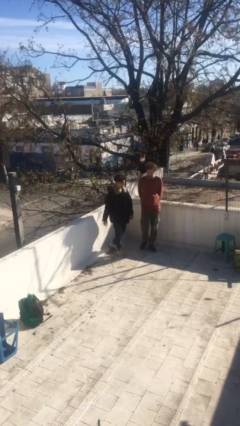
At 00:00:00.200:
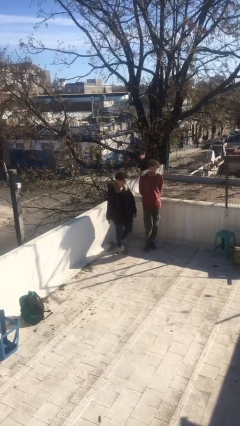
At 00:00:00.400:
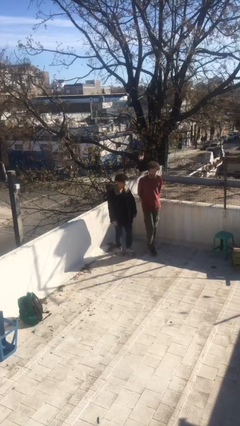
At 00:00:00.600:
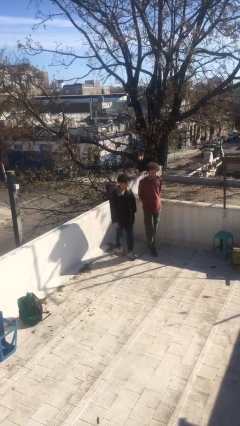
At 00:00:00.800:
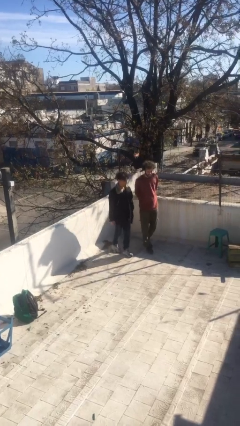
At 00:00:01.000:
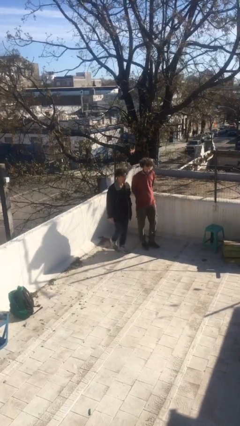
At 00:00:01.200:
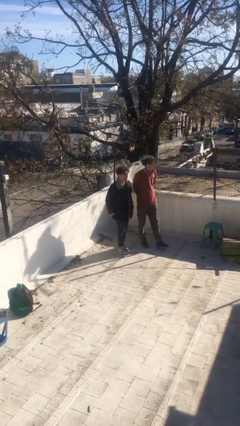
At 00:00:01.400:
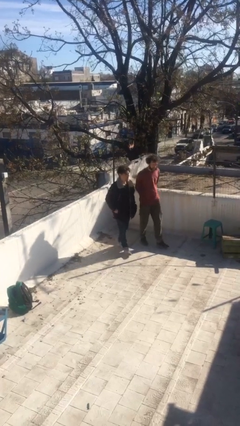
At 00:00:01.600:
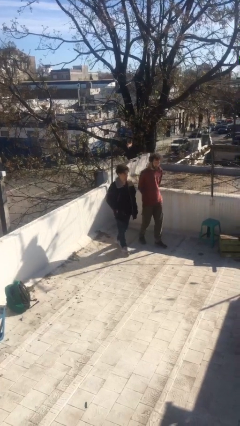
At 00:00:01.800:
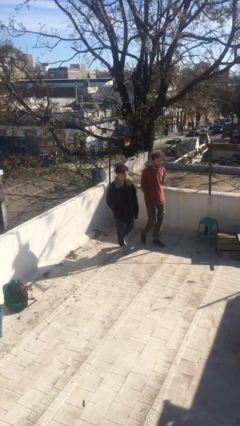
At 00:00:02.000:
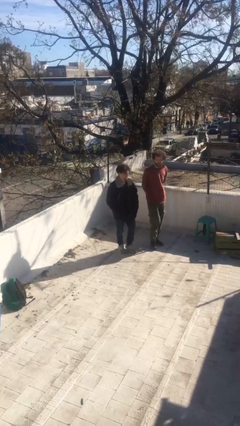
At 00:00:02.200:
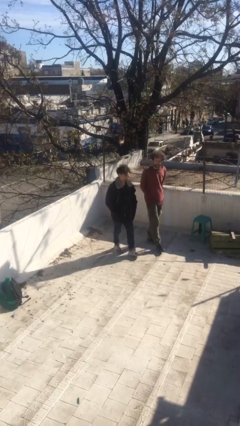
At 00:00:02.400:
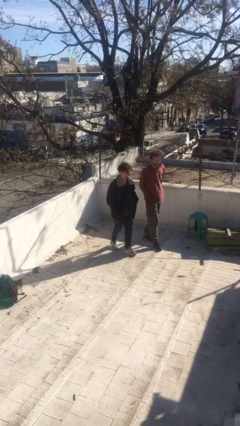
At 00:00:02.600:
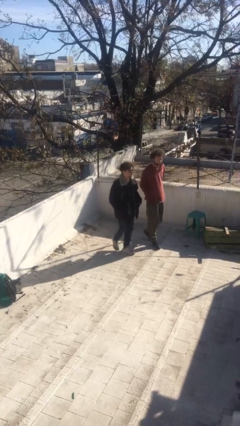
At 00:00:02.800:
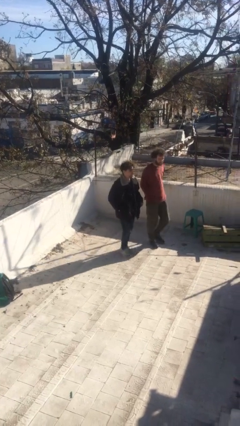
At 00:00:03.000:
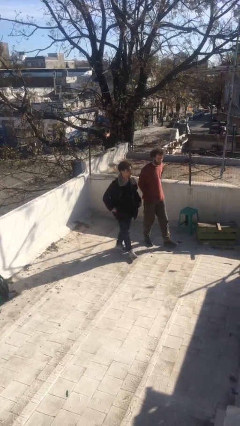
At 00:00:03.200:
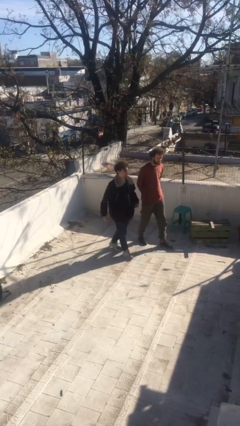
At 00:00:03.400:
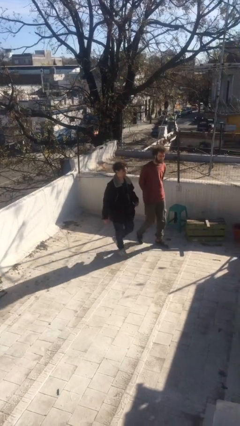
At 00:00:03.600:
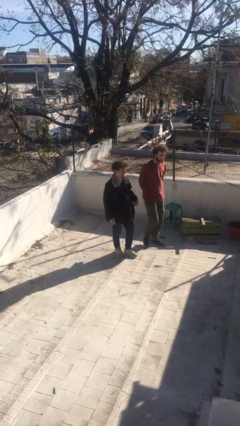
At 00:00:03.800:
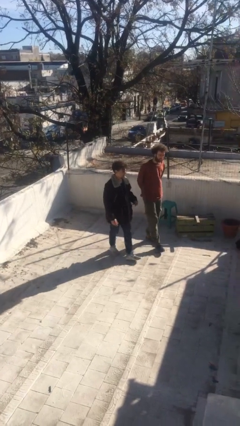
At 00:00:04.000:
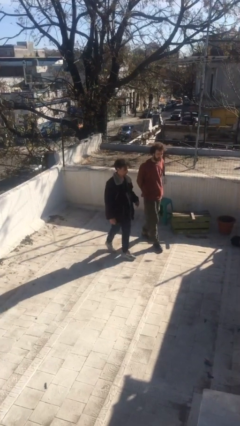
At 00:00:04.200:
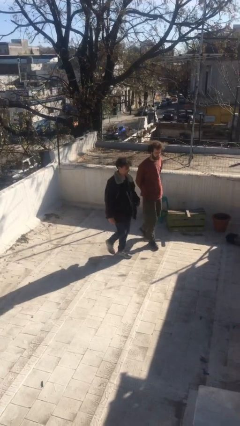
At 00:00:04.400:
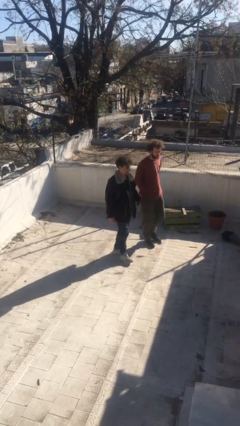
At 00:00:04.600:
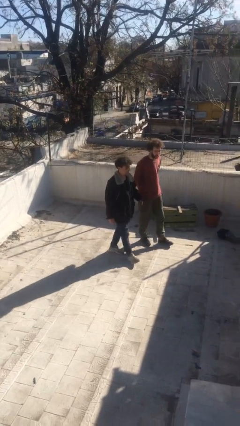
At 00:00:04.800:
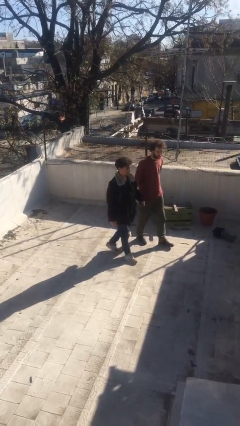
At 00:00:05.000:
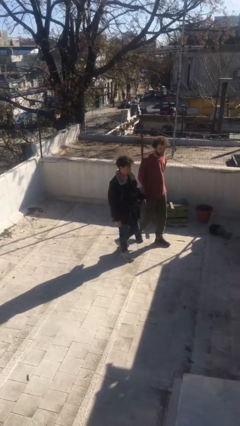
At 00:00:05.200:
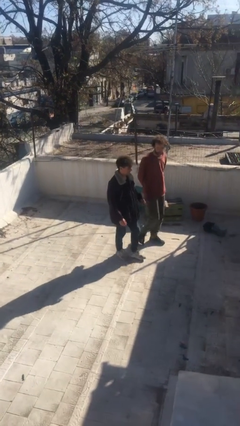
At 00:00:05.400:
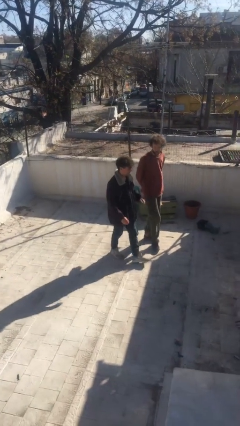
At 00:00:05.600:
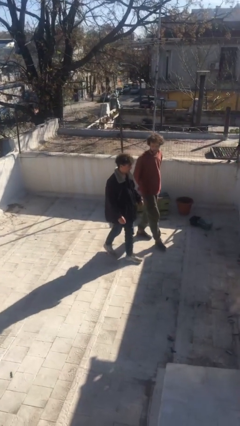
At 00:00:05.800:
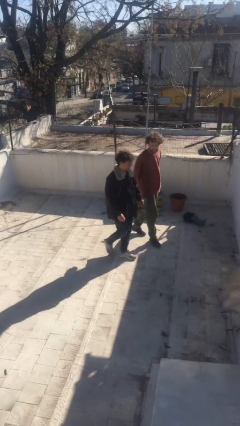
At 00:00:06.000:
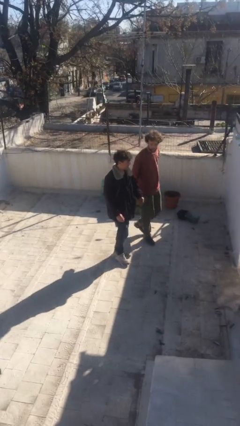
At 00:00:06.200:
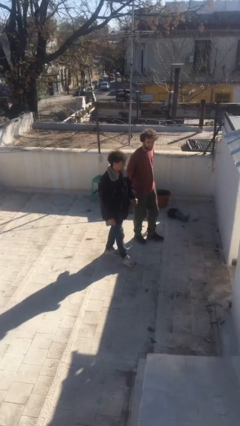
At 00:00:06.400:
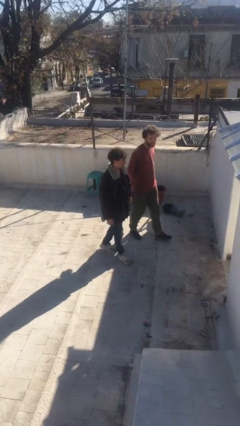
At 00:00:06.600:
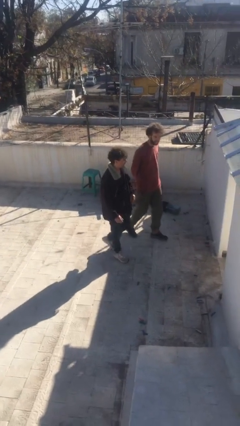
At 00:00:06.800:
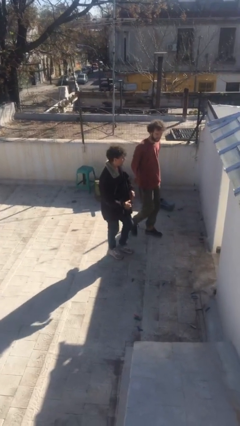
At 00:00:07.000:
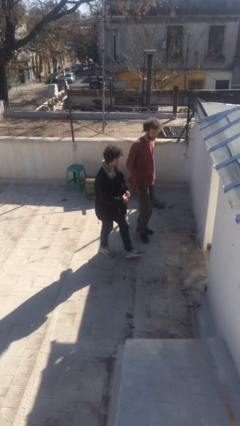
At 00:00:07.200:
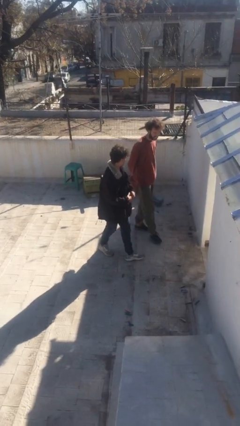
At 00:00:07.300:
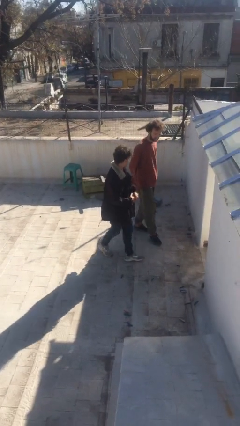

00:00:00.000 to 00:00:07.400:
person talks to person

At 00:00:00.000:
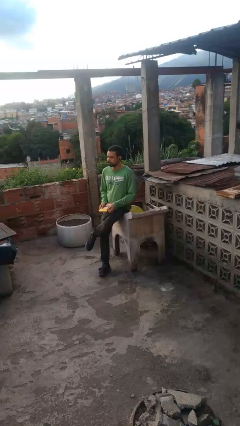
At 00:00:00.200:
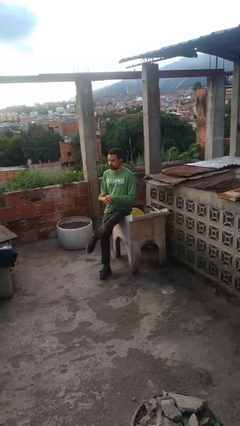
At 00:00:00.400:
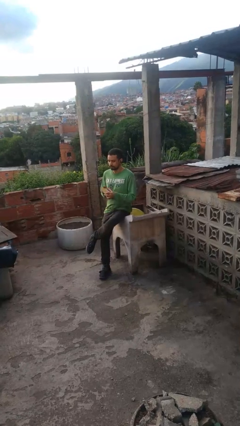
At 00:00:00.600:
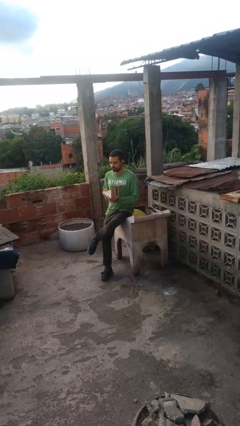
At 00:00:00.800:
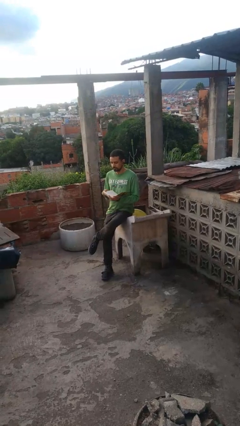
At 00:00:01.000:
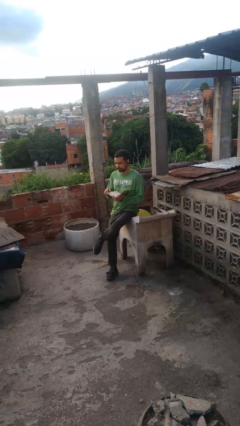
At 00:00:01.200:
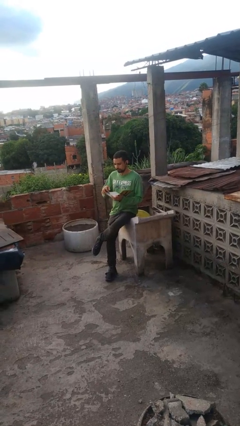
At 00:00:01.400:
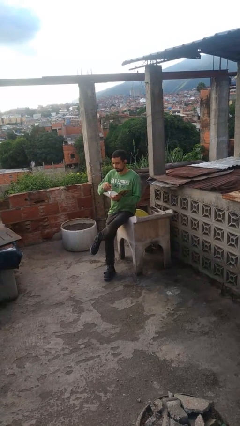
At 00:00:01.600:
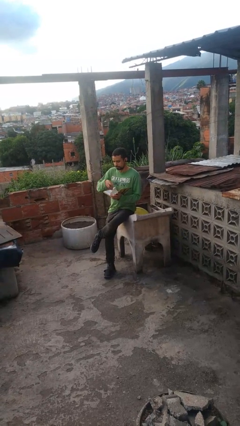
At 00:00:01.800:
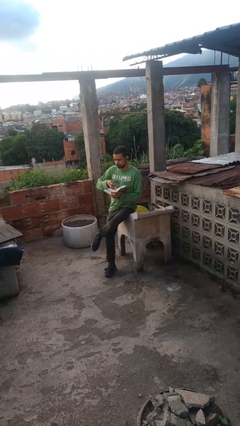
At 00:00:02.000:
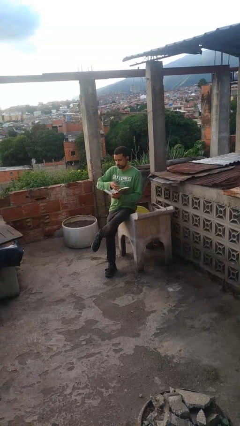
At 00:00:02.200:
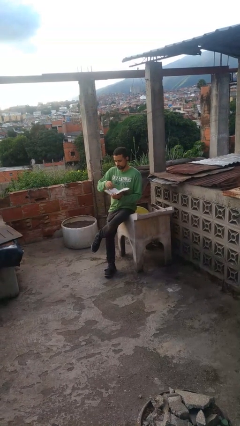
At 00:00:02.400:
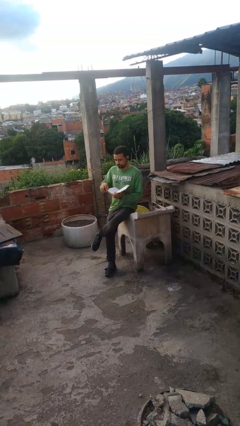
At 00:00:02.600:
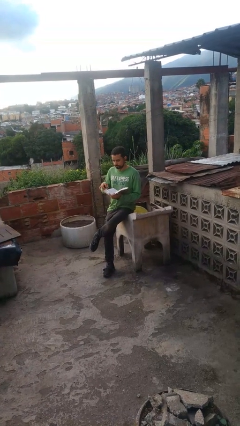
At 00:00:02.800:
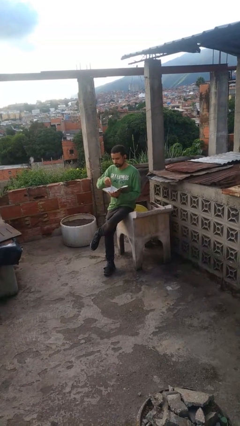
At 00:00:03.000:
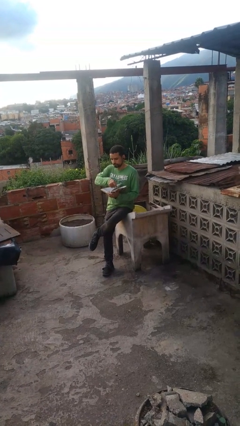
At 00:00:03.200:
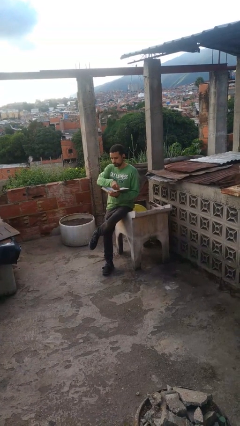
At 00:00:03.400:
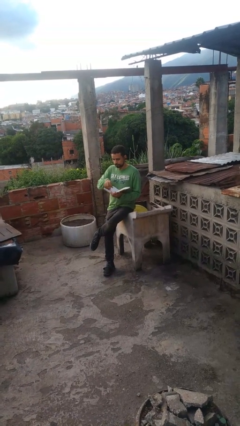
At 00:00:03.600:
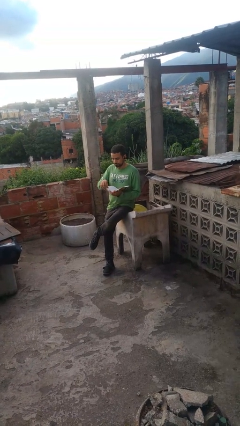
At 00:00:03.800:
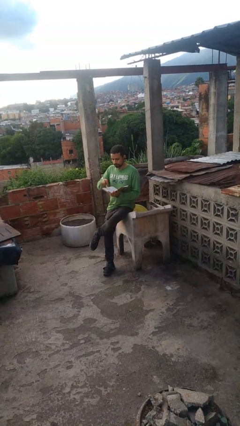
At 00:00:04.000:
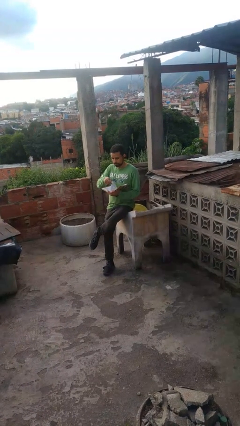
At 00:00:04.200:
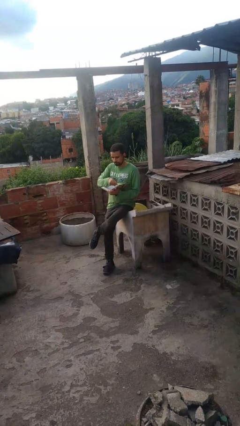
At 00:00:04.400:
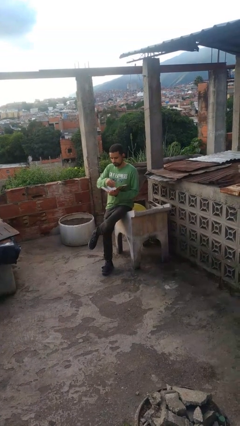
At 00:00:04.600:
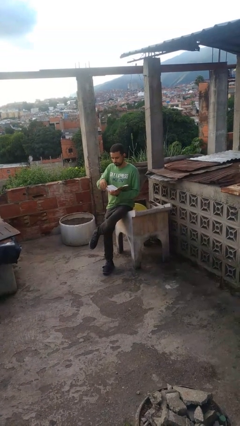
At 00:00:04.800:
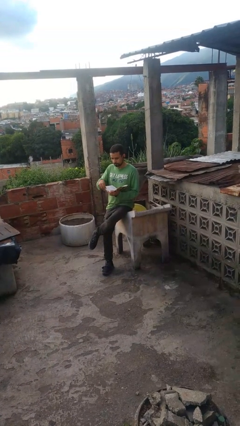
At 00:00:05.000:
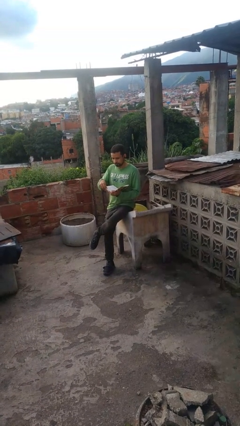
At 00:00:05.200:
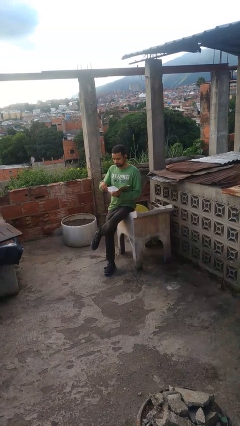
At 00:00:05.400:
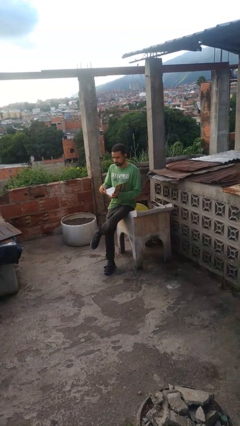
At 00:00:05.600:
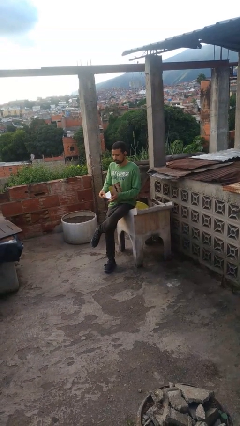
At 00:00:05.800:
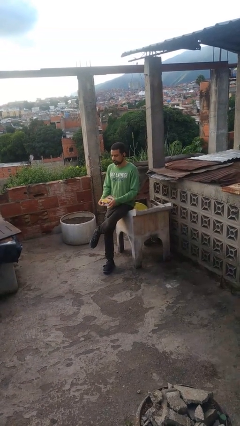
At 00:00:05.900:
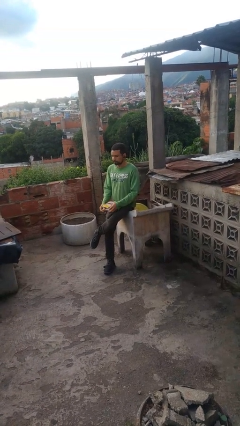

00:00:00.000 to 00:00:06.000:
person reads book

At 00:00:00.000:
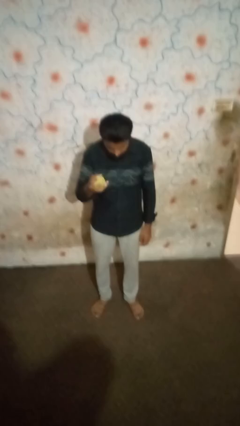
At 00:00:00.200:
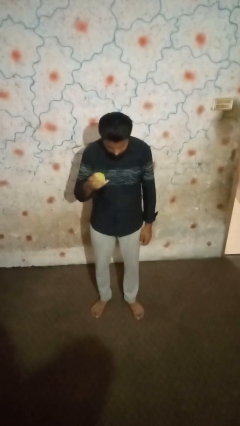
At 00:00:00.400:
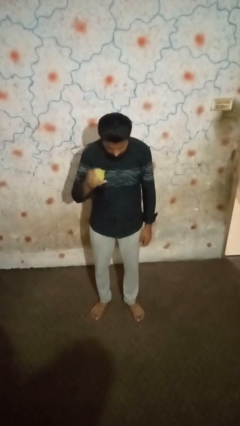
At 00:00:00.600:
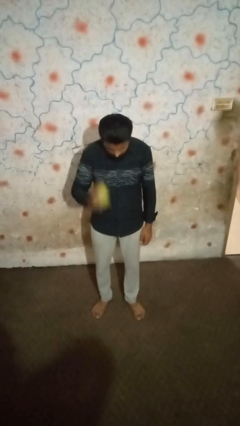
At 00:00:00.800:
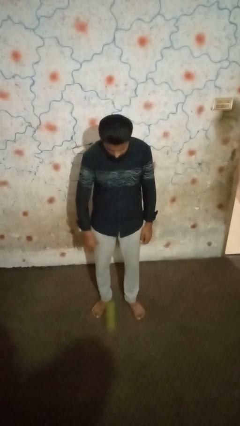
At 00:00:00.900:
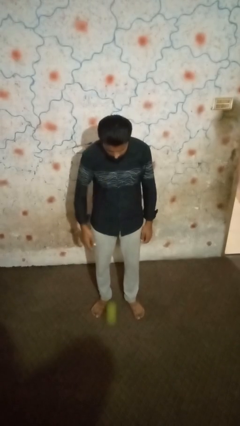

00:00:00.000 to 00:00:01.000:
person bounces ball on floor

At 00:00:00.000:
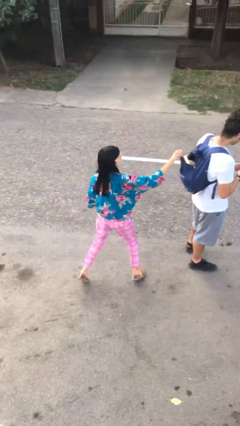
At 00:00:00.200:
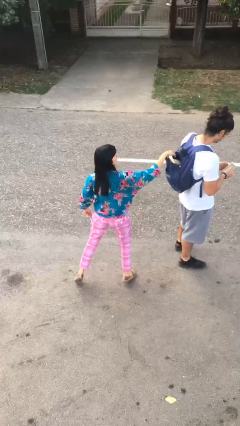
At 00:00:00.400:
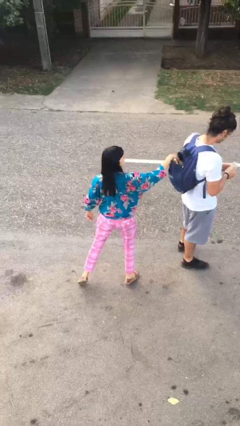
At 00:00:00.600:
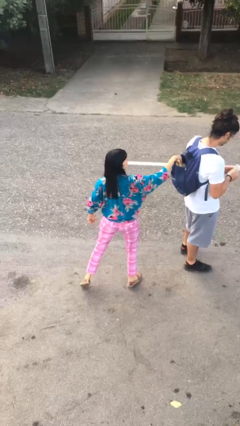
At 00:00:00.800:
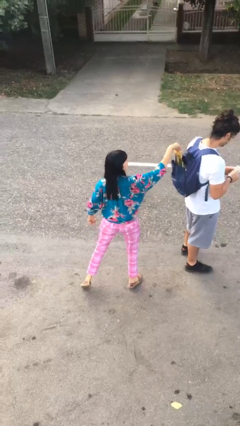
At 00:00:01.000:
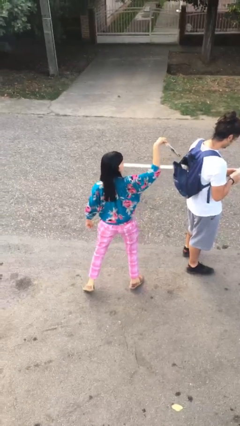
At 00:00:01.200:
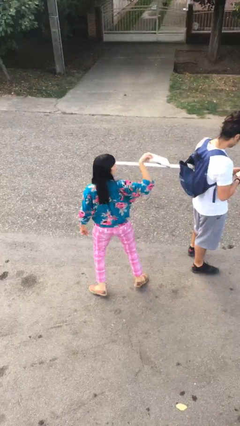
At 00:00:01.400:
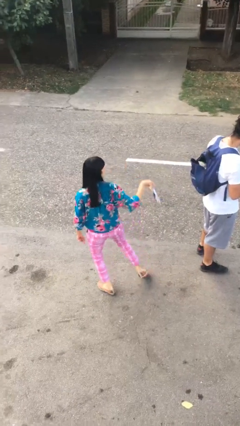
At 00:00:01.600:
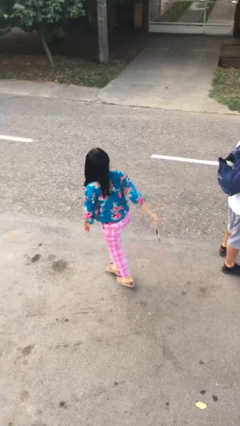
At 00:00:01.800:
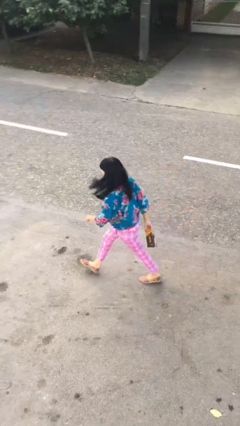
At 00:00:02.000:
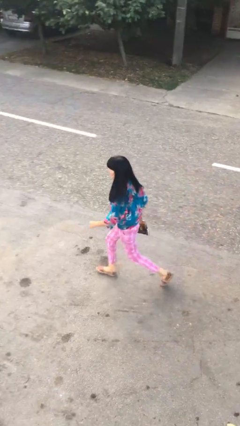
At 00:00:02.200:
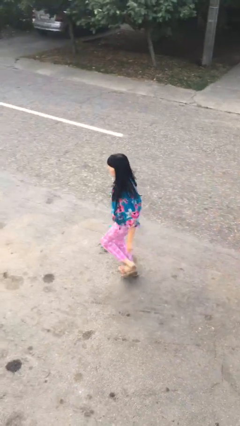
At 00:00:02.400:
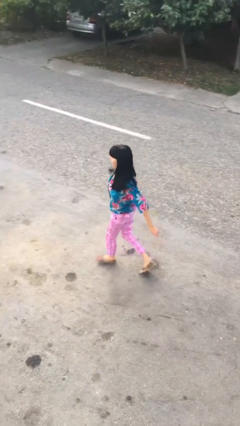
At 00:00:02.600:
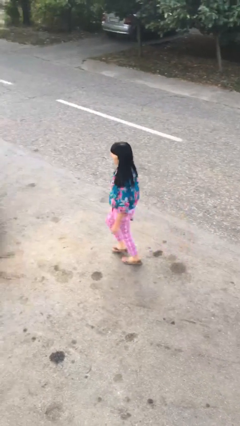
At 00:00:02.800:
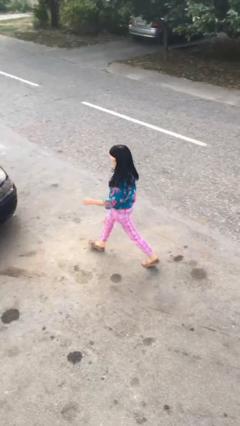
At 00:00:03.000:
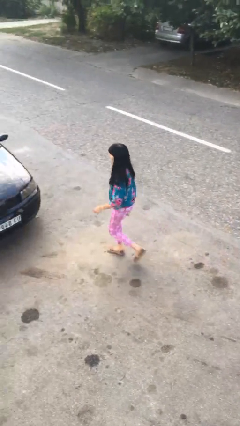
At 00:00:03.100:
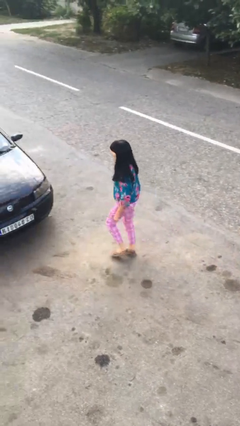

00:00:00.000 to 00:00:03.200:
person steals object from person
